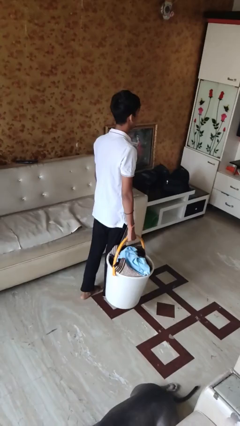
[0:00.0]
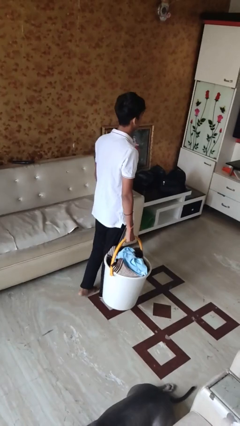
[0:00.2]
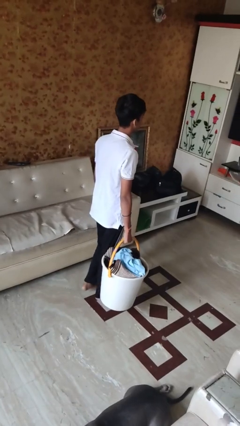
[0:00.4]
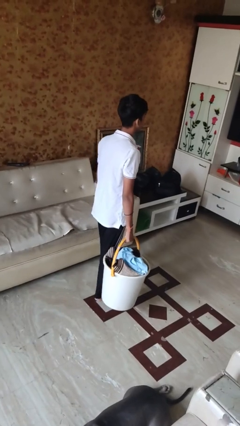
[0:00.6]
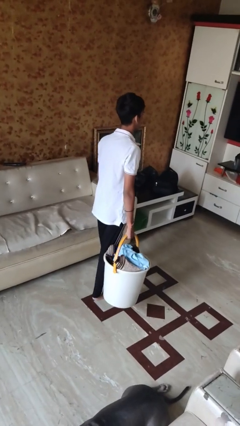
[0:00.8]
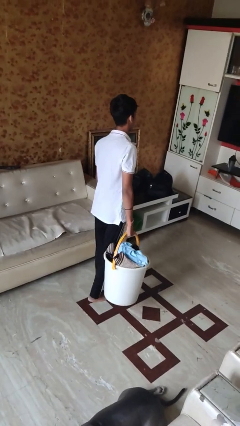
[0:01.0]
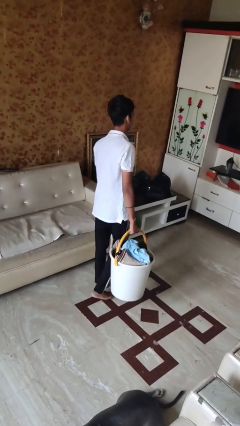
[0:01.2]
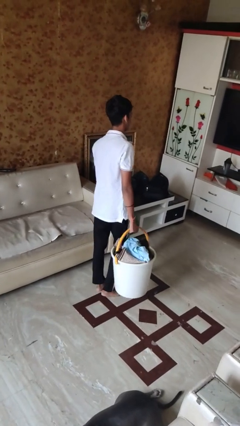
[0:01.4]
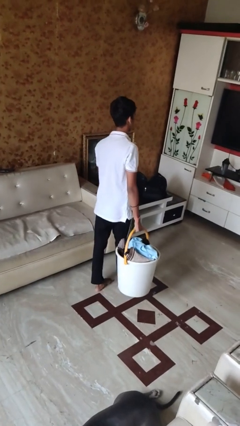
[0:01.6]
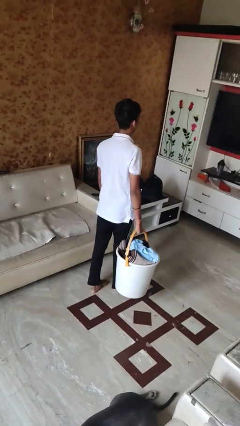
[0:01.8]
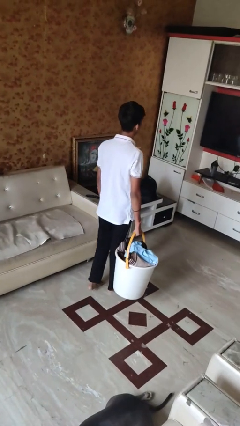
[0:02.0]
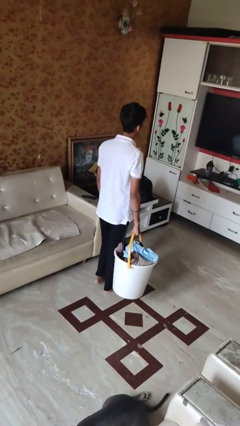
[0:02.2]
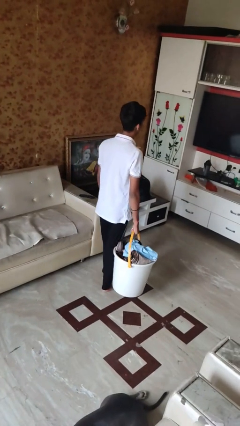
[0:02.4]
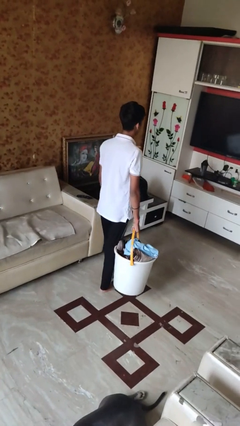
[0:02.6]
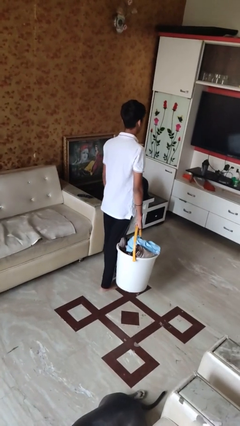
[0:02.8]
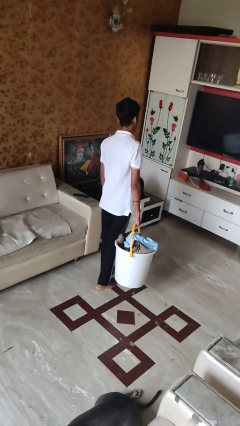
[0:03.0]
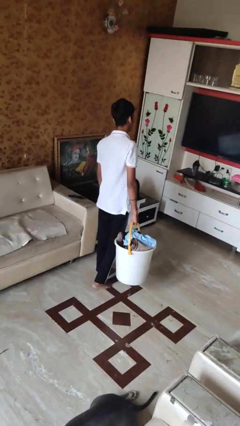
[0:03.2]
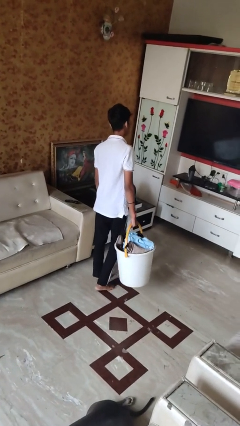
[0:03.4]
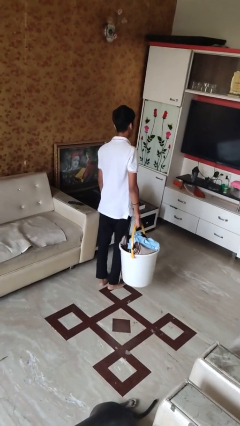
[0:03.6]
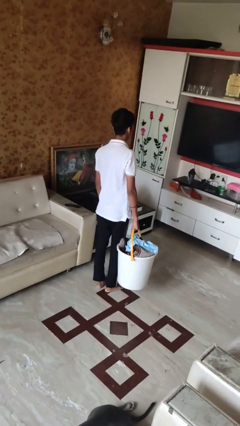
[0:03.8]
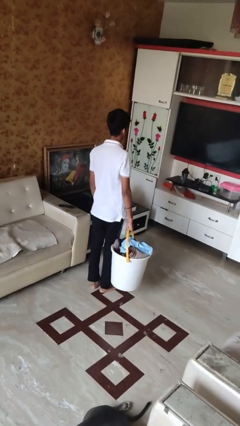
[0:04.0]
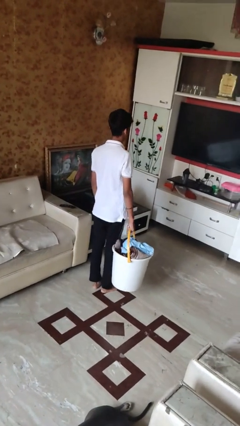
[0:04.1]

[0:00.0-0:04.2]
person carries laundry basket

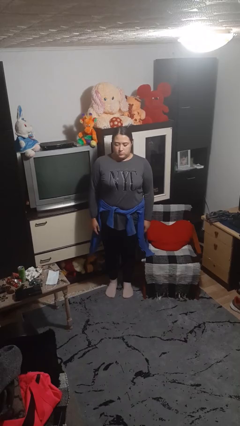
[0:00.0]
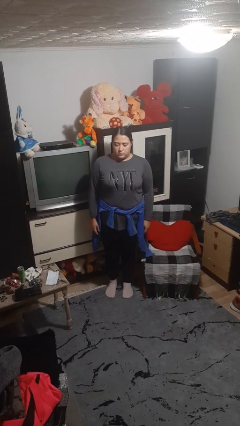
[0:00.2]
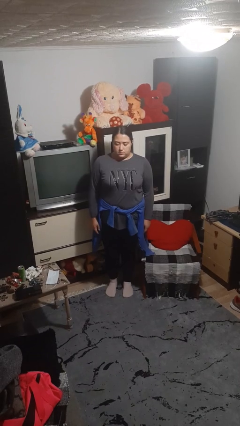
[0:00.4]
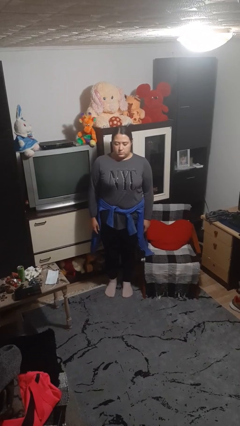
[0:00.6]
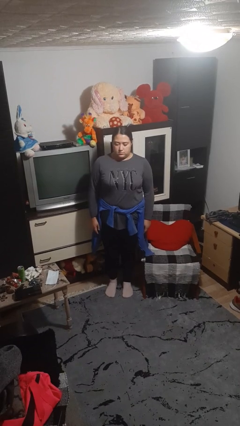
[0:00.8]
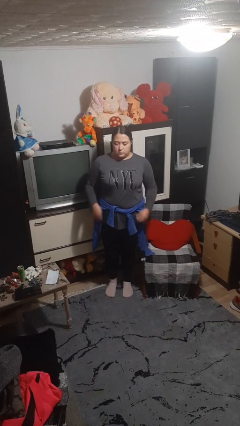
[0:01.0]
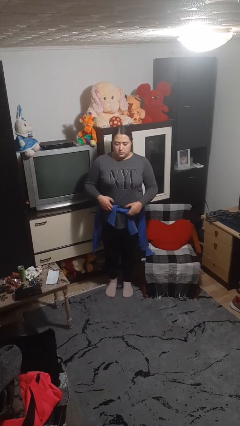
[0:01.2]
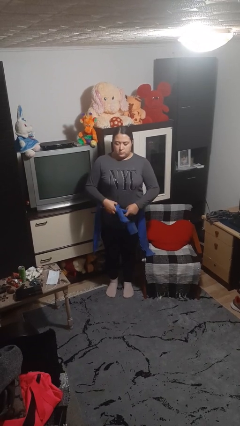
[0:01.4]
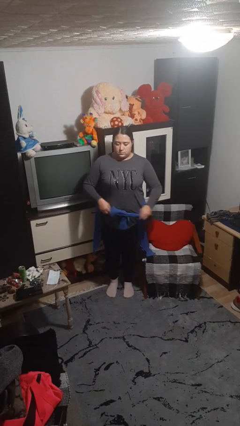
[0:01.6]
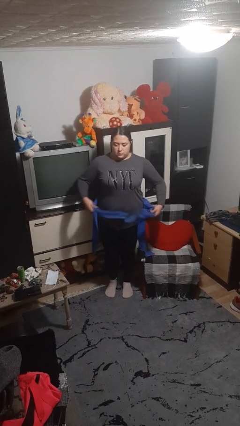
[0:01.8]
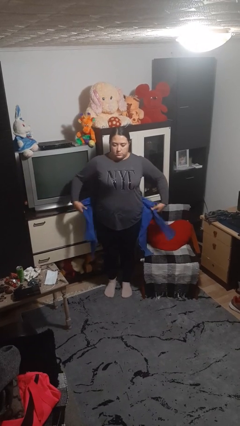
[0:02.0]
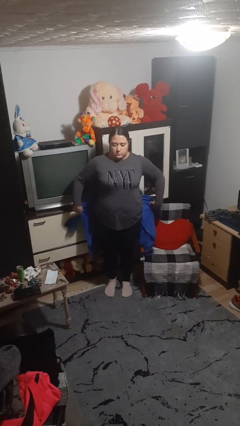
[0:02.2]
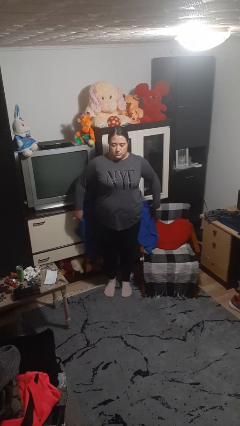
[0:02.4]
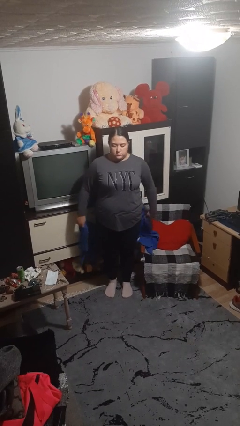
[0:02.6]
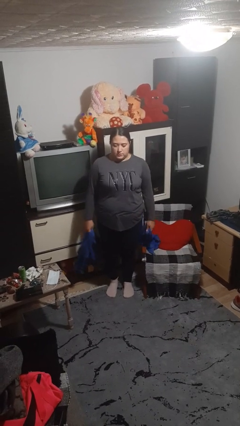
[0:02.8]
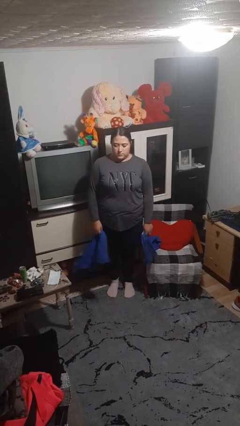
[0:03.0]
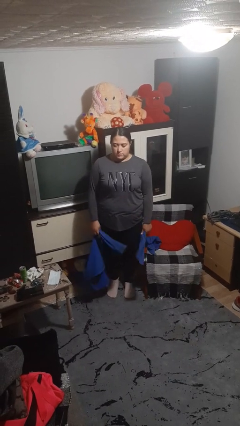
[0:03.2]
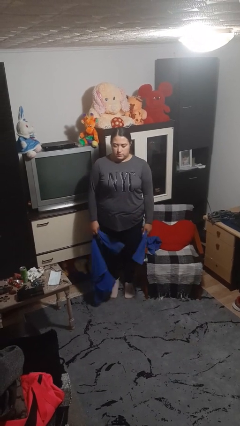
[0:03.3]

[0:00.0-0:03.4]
person unties jacket around waist

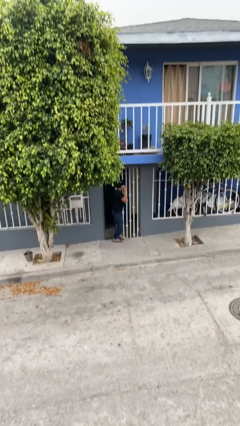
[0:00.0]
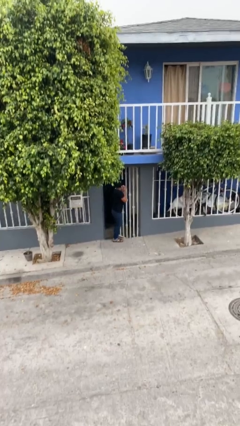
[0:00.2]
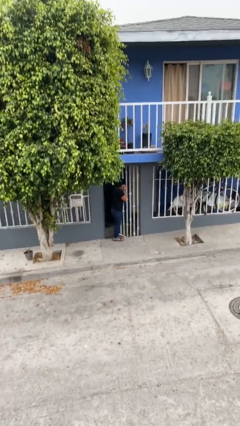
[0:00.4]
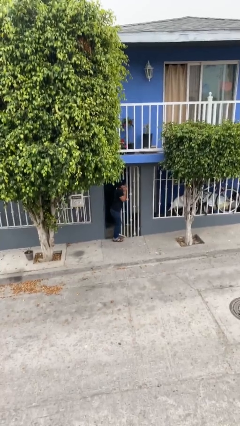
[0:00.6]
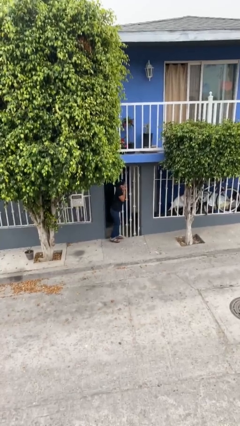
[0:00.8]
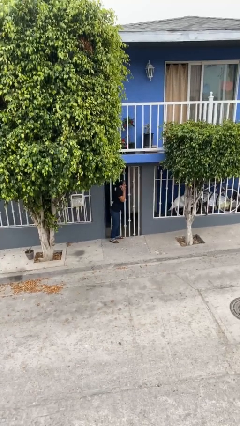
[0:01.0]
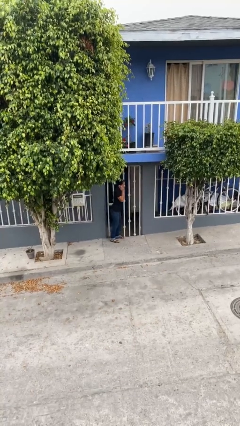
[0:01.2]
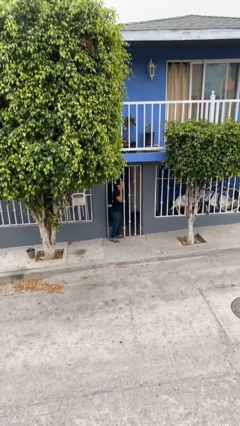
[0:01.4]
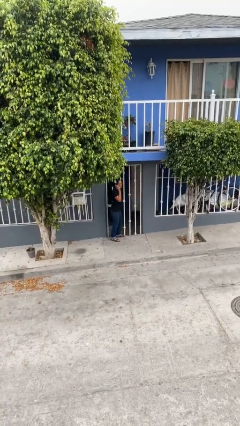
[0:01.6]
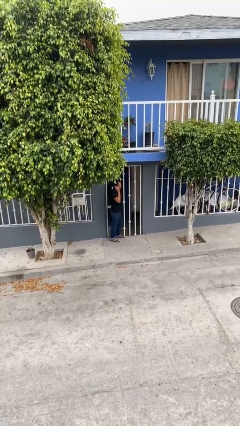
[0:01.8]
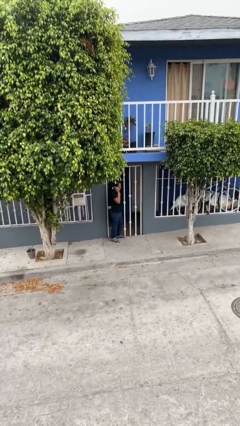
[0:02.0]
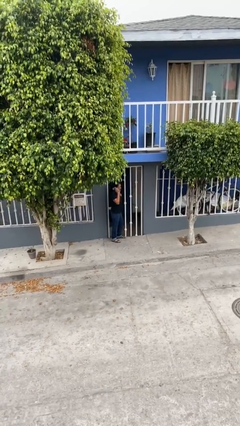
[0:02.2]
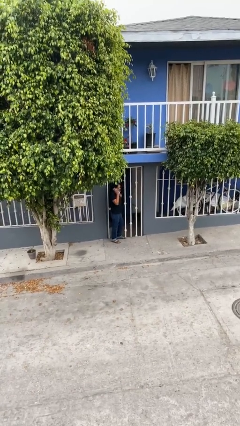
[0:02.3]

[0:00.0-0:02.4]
person closes facility door

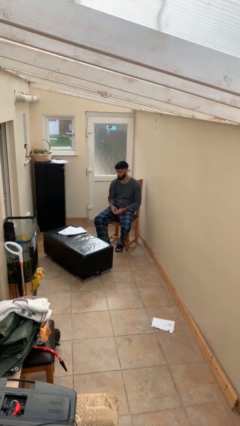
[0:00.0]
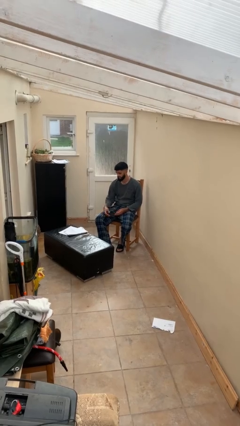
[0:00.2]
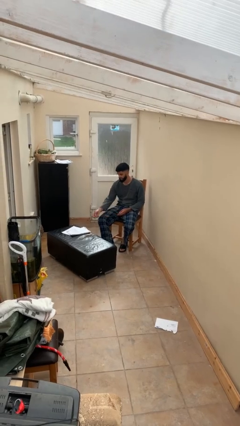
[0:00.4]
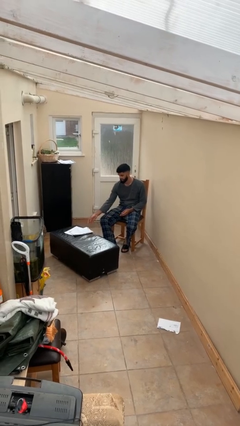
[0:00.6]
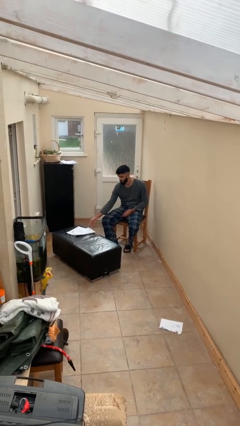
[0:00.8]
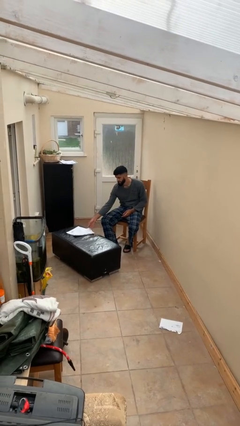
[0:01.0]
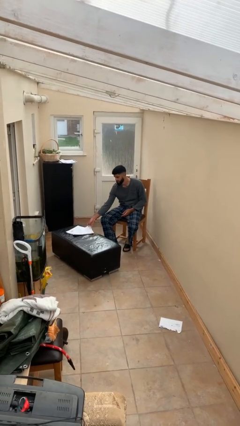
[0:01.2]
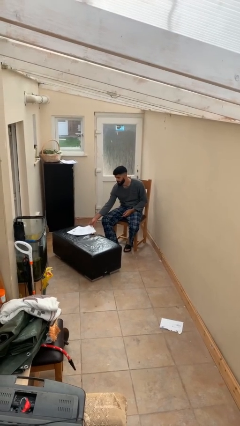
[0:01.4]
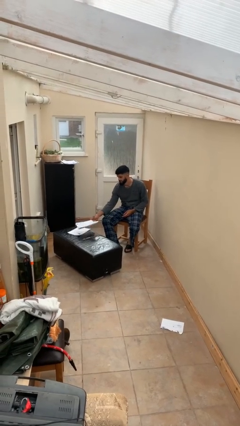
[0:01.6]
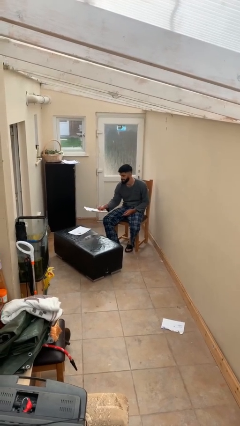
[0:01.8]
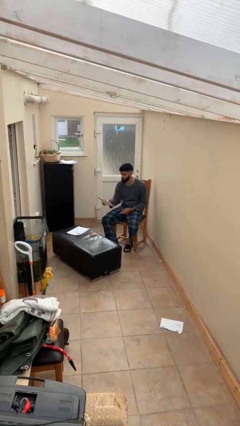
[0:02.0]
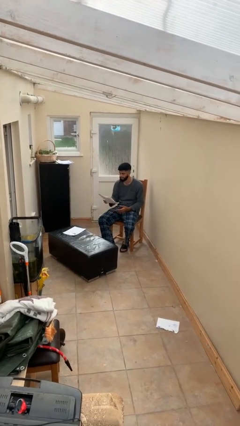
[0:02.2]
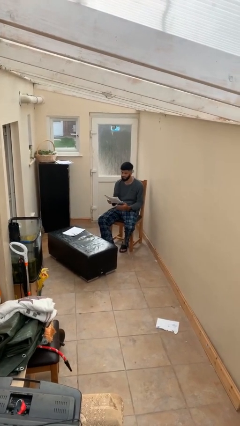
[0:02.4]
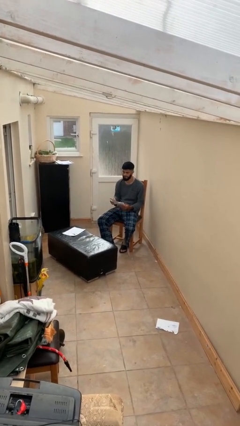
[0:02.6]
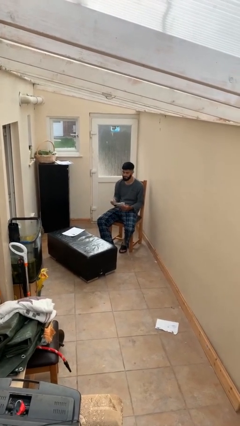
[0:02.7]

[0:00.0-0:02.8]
person picks up object from table

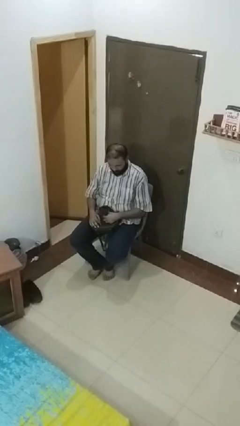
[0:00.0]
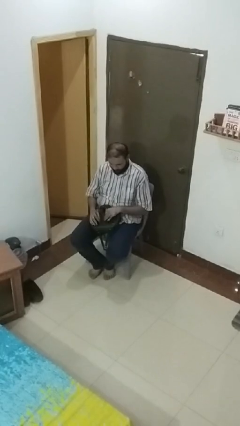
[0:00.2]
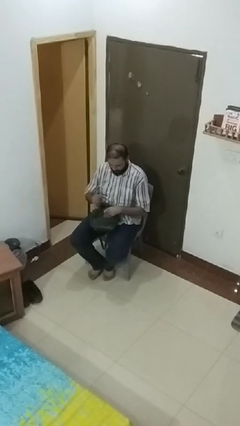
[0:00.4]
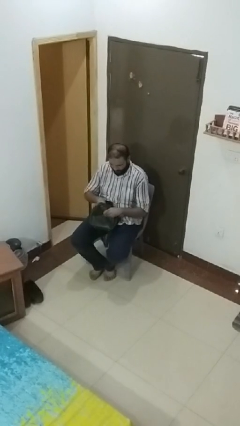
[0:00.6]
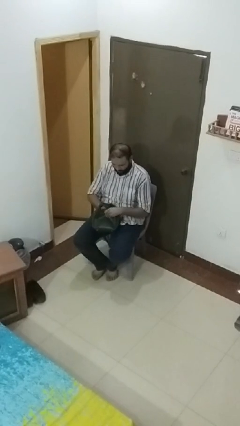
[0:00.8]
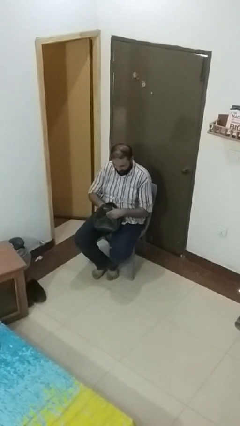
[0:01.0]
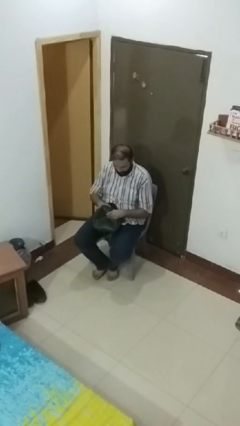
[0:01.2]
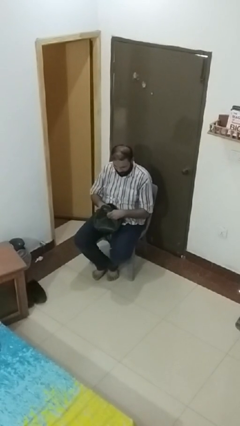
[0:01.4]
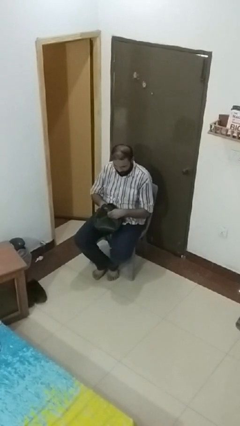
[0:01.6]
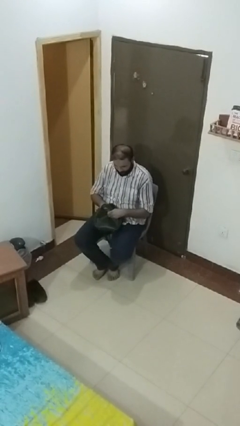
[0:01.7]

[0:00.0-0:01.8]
person searches in purse

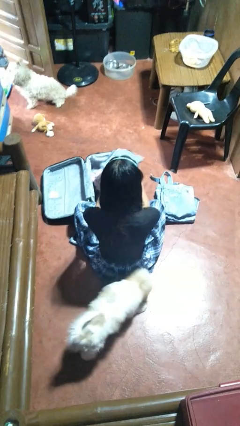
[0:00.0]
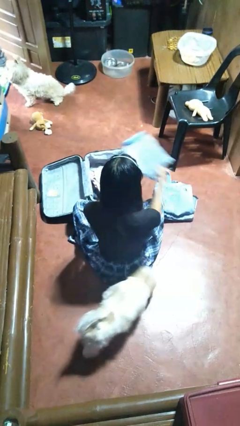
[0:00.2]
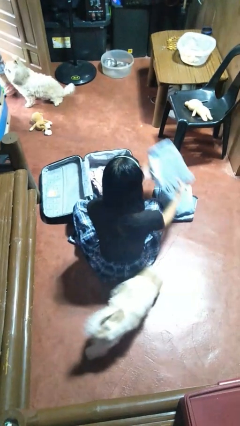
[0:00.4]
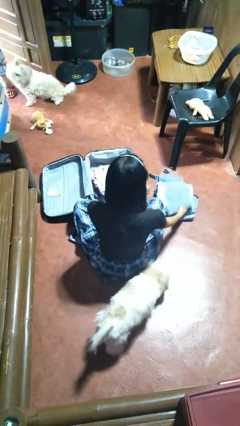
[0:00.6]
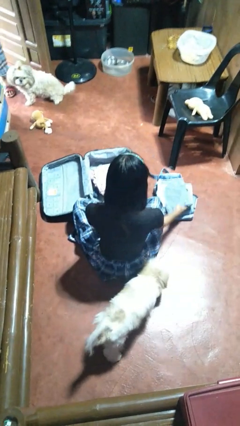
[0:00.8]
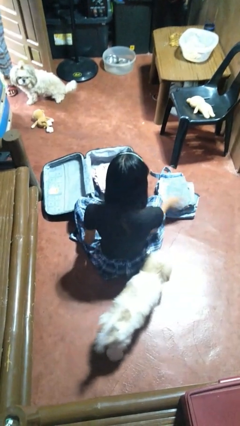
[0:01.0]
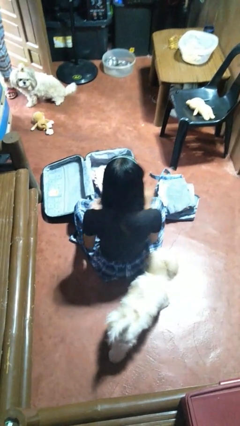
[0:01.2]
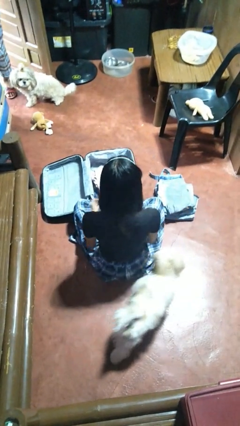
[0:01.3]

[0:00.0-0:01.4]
person unloads clothes from suitcase

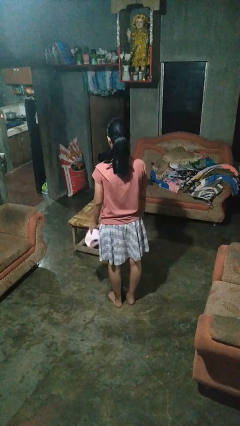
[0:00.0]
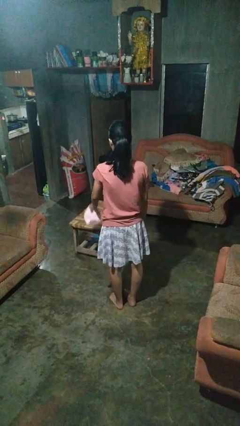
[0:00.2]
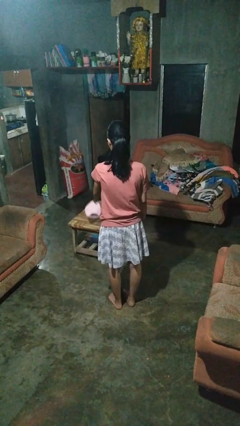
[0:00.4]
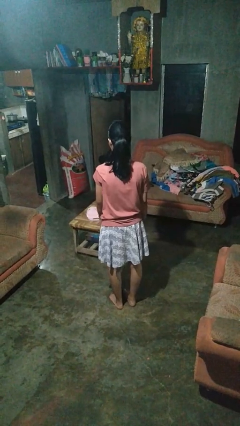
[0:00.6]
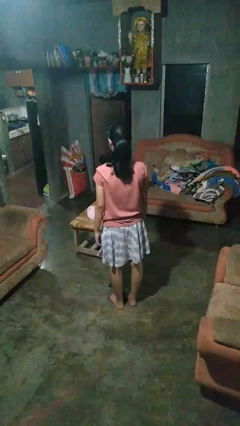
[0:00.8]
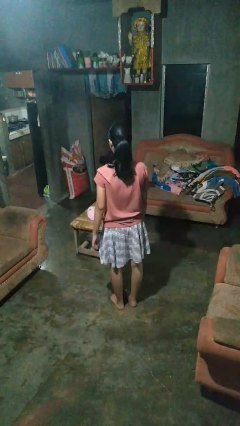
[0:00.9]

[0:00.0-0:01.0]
person throws object on table
